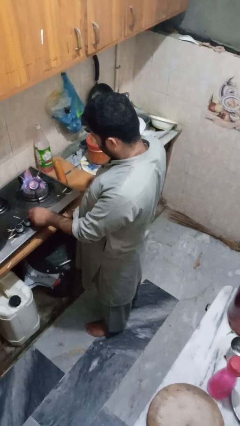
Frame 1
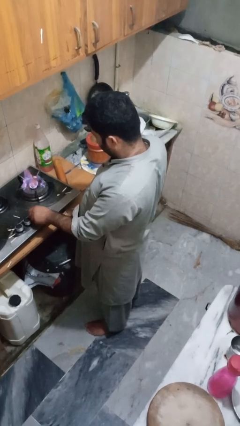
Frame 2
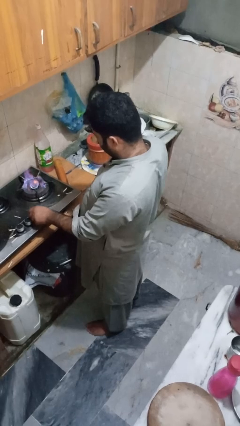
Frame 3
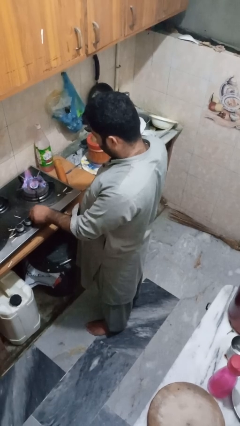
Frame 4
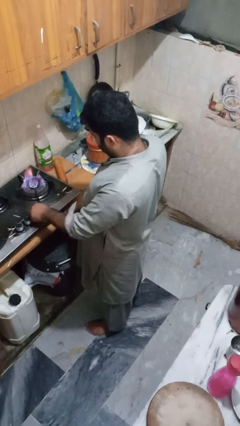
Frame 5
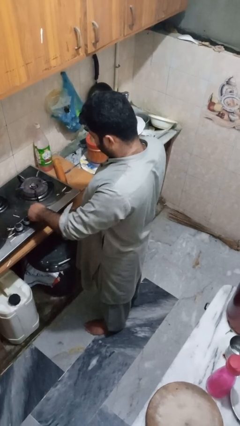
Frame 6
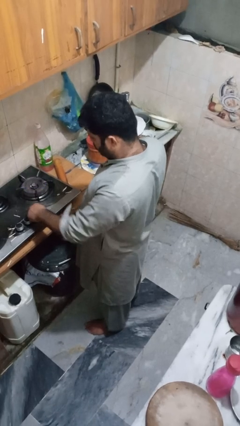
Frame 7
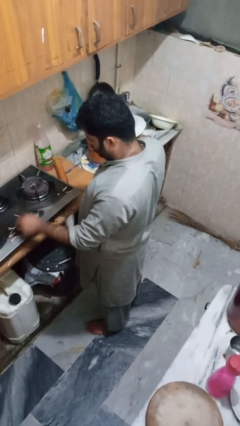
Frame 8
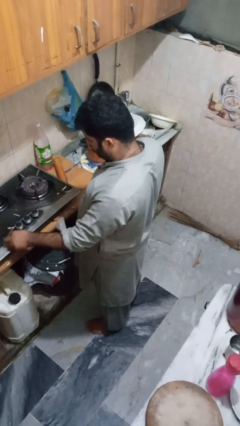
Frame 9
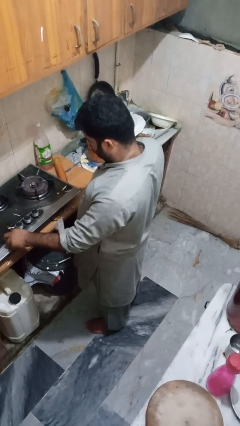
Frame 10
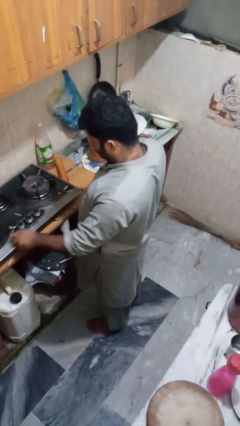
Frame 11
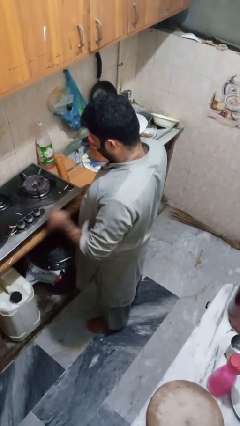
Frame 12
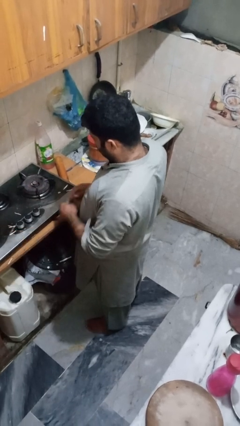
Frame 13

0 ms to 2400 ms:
person turns off stovetop

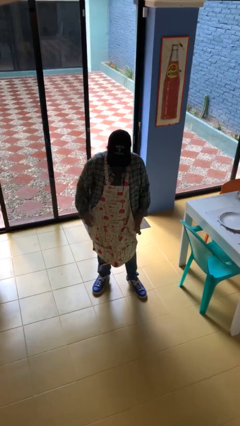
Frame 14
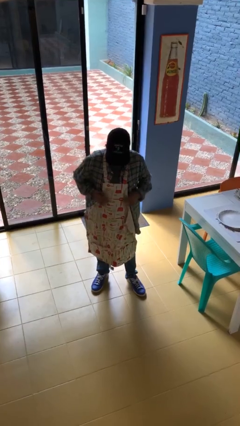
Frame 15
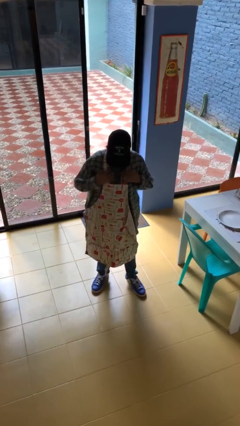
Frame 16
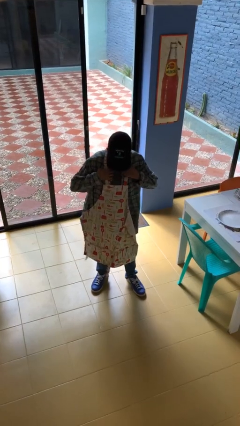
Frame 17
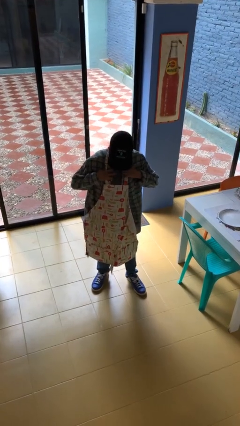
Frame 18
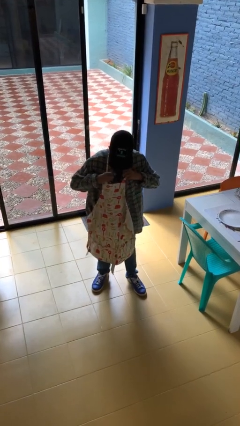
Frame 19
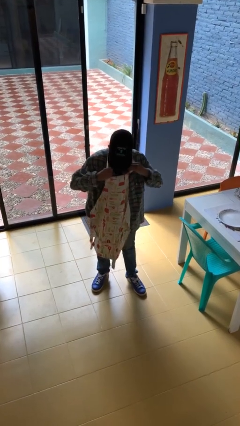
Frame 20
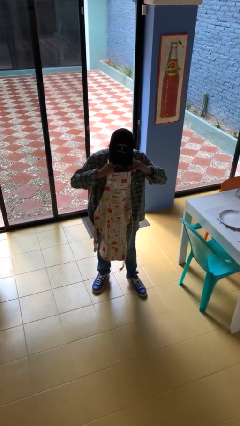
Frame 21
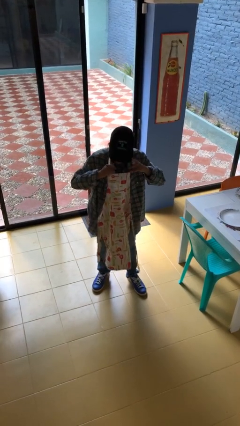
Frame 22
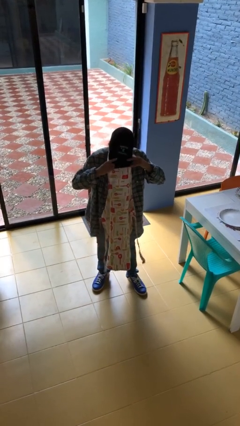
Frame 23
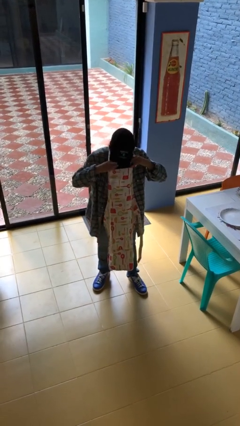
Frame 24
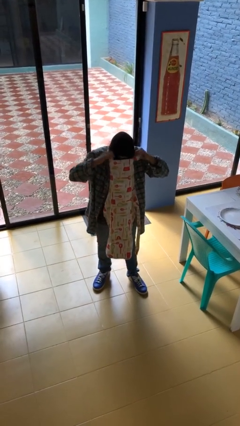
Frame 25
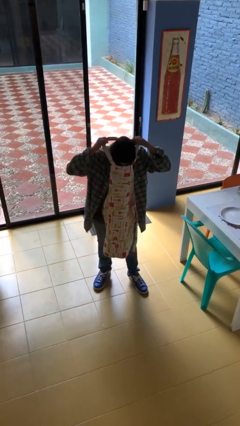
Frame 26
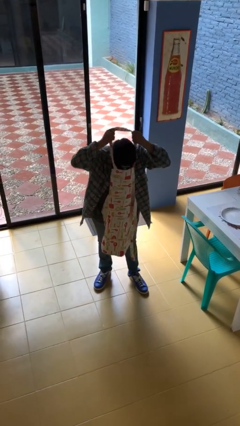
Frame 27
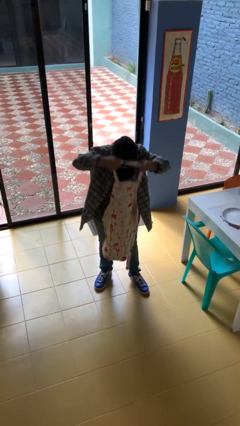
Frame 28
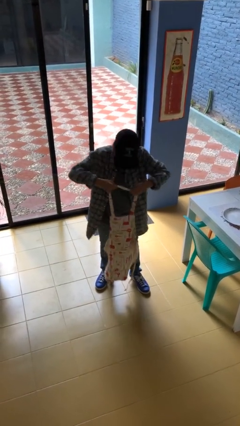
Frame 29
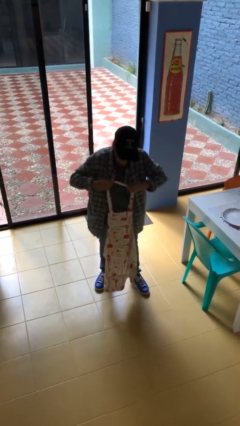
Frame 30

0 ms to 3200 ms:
person takes off apron

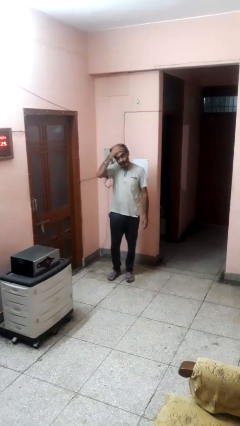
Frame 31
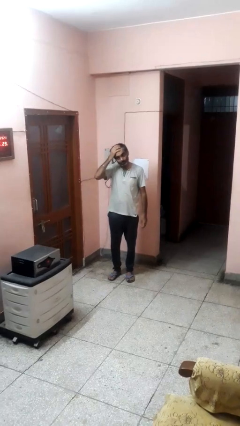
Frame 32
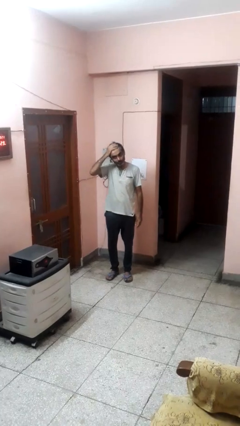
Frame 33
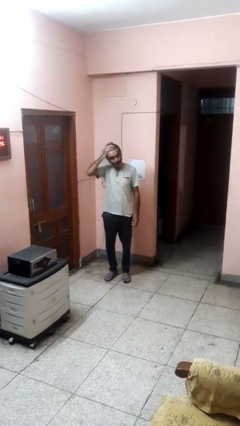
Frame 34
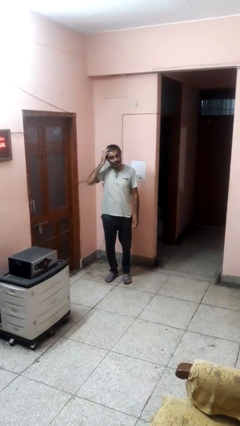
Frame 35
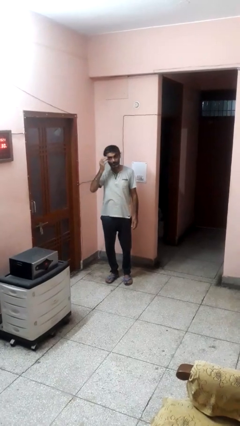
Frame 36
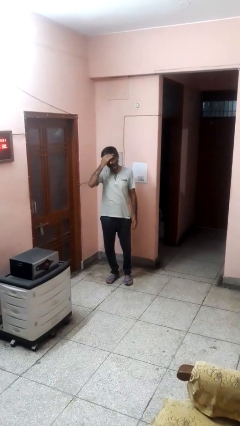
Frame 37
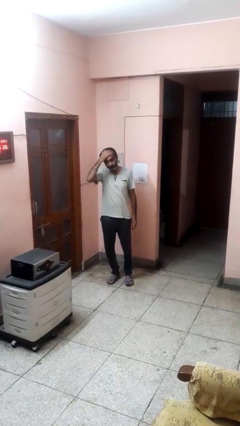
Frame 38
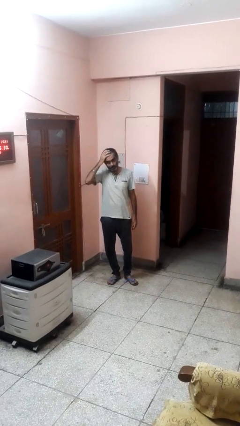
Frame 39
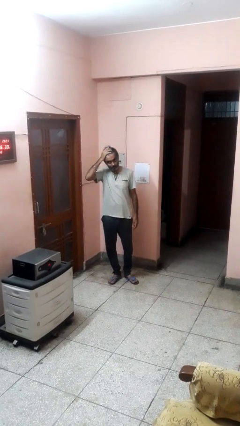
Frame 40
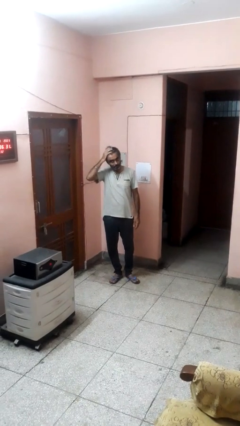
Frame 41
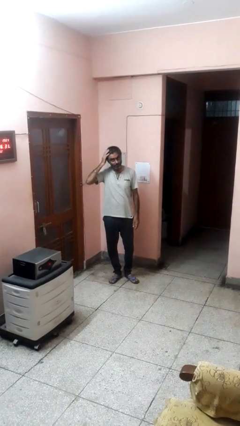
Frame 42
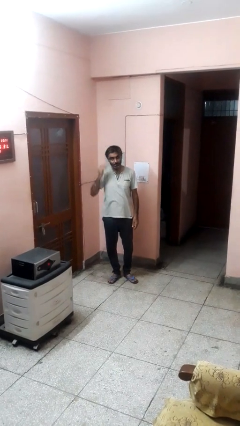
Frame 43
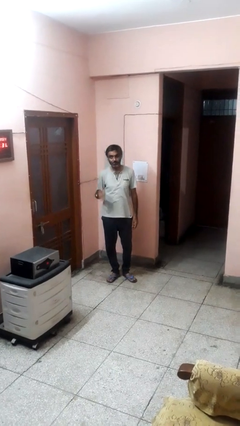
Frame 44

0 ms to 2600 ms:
person strokes hair

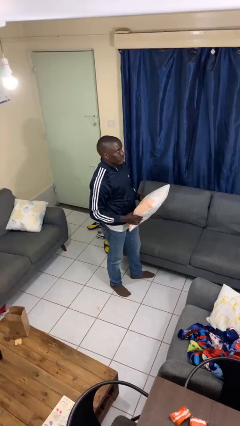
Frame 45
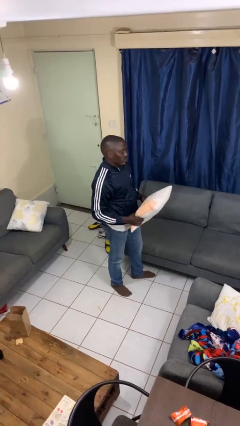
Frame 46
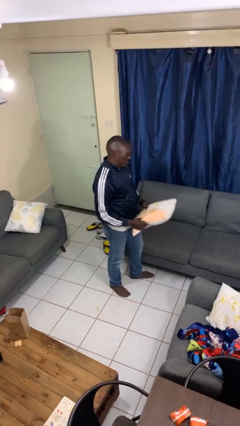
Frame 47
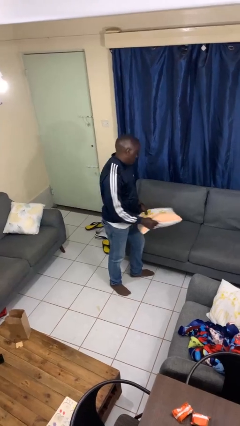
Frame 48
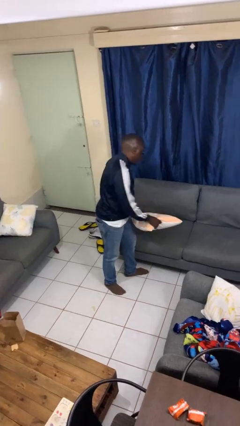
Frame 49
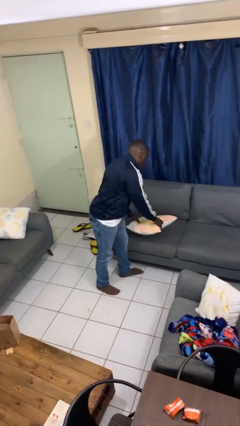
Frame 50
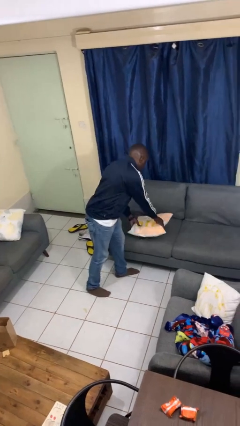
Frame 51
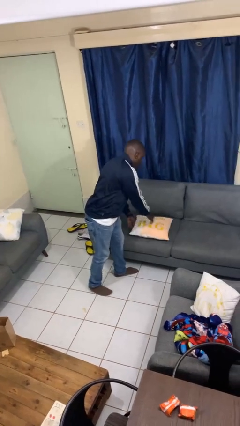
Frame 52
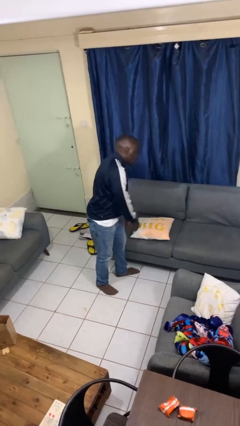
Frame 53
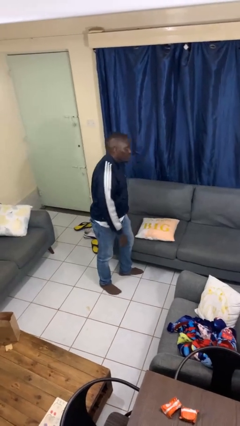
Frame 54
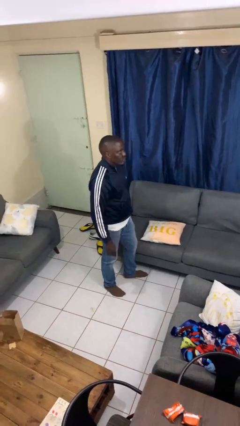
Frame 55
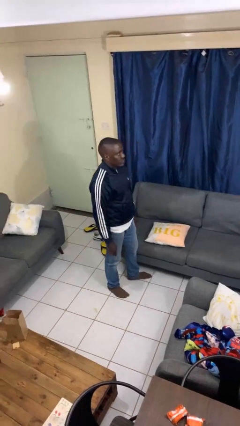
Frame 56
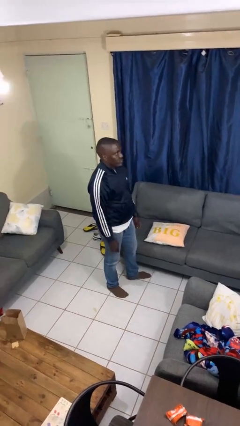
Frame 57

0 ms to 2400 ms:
person puts down object on couch

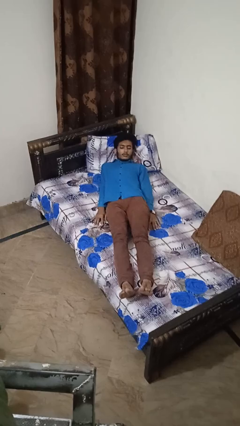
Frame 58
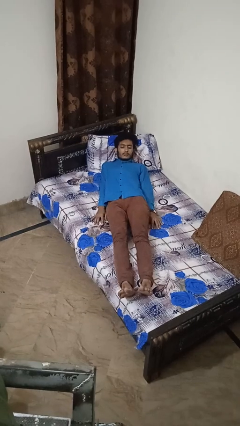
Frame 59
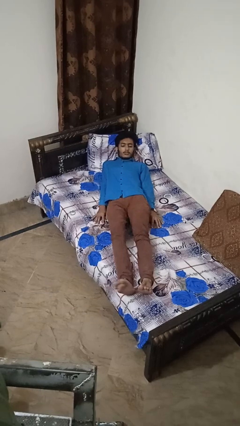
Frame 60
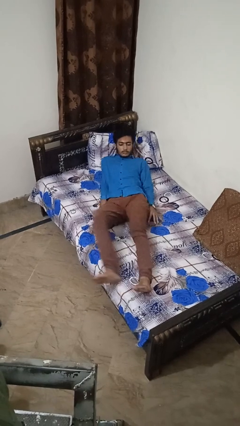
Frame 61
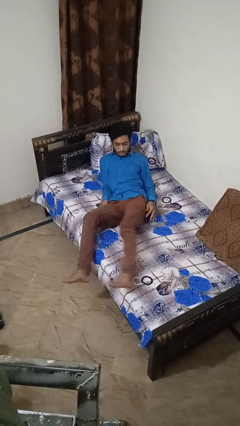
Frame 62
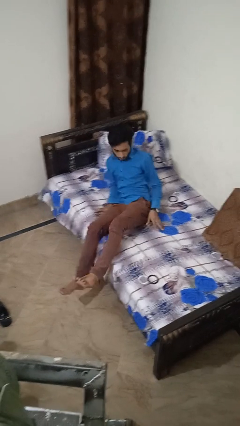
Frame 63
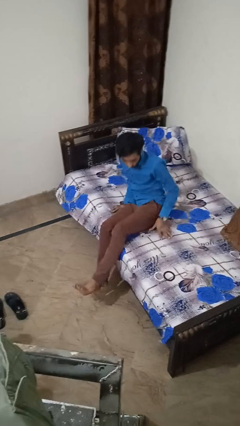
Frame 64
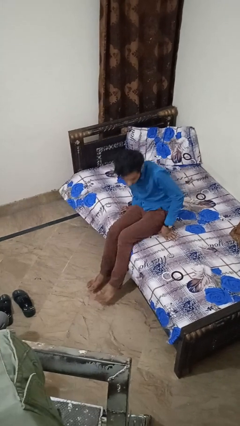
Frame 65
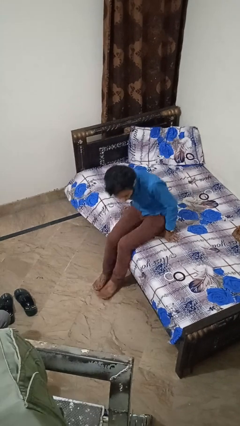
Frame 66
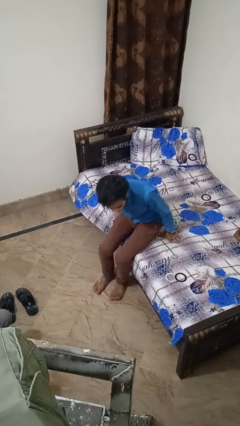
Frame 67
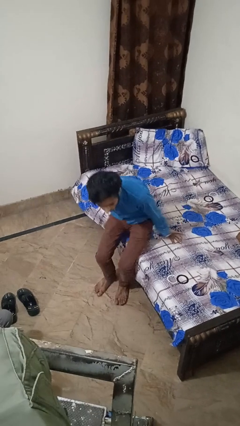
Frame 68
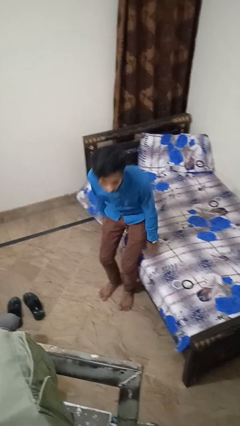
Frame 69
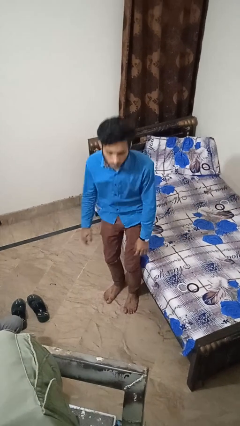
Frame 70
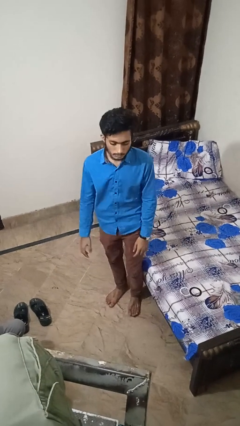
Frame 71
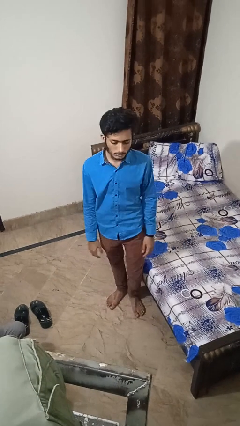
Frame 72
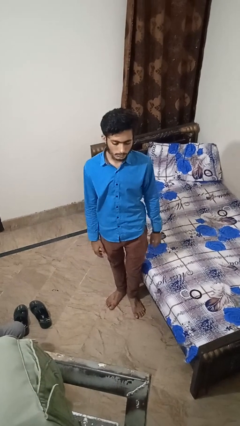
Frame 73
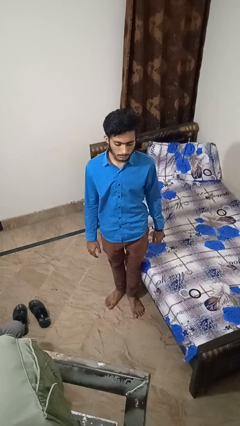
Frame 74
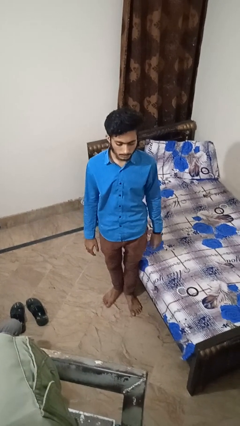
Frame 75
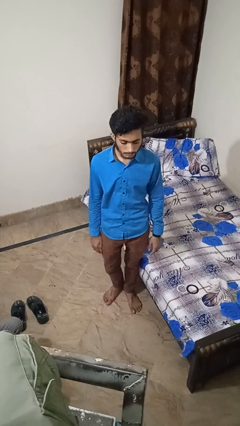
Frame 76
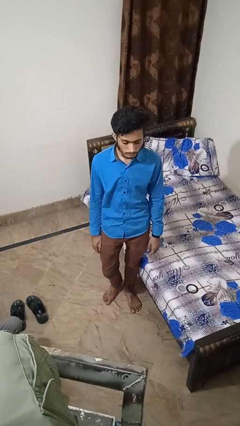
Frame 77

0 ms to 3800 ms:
person stands up

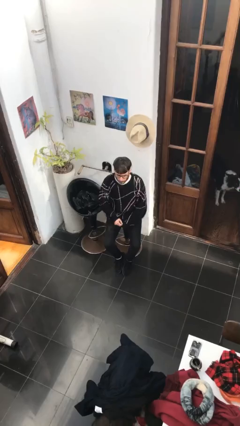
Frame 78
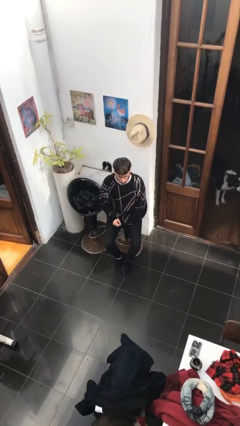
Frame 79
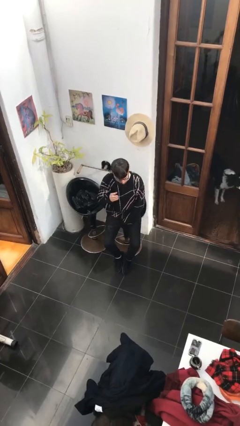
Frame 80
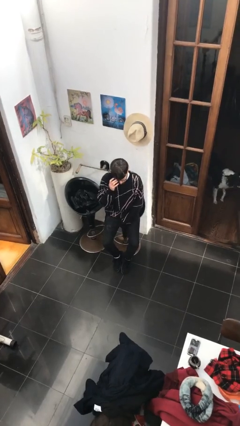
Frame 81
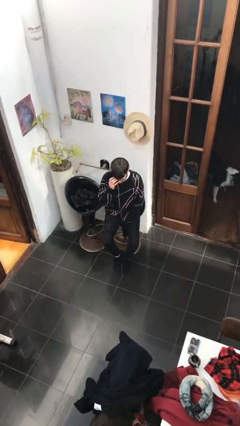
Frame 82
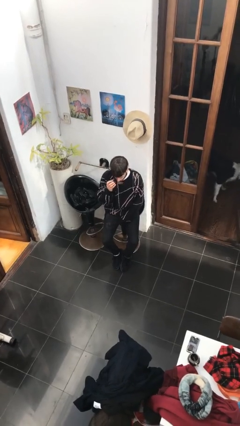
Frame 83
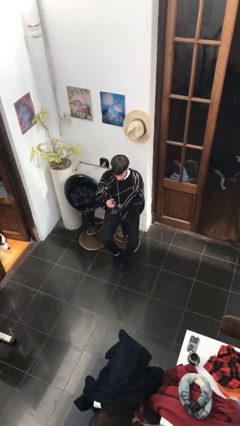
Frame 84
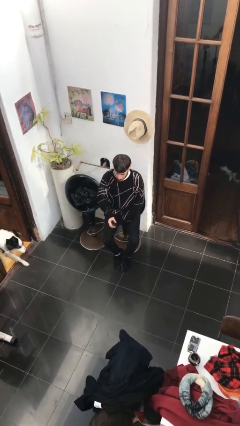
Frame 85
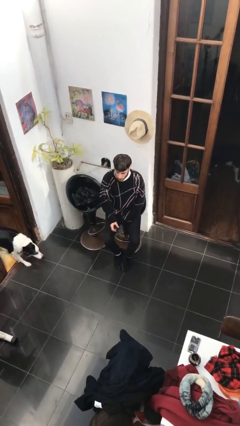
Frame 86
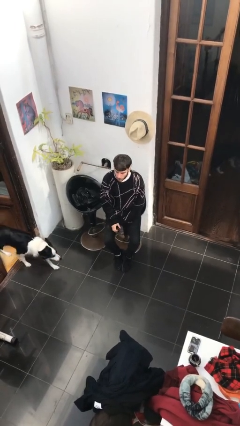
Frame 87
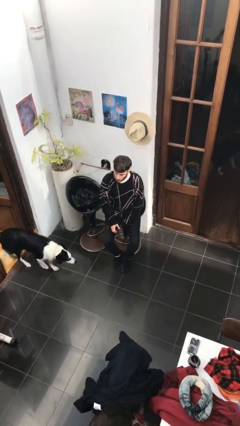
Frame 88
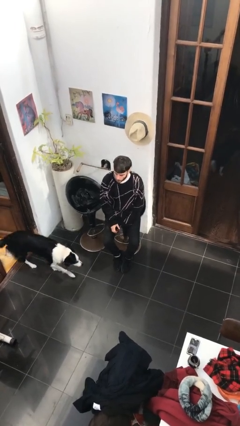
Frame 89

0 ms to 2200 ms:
person takes off glasses

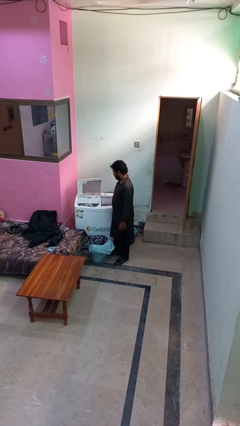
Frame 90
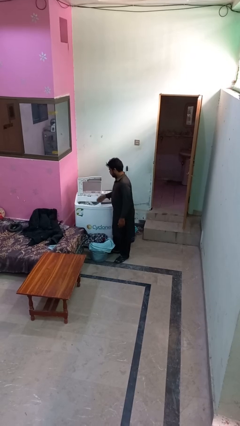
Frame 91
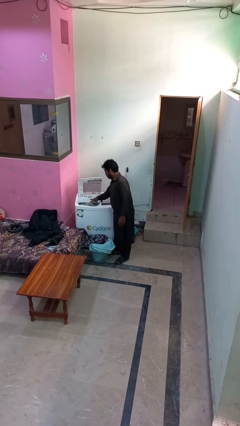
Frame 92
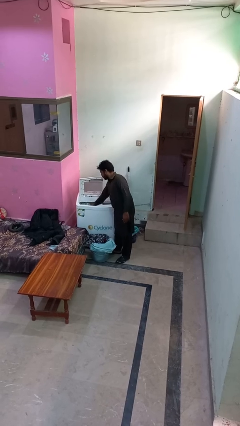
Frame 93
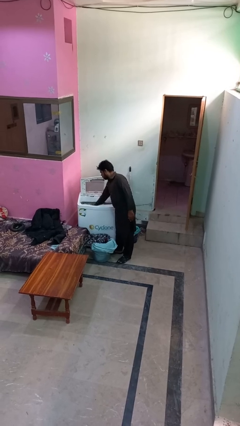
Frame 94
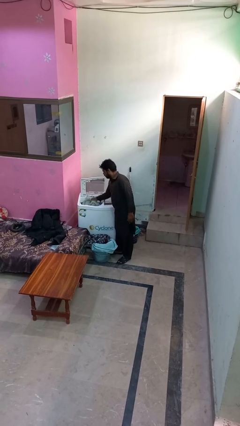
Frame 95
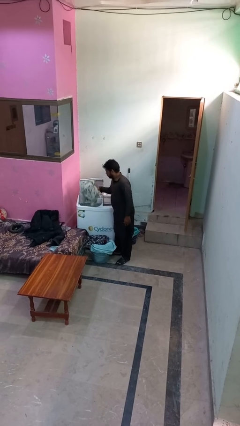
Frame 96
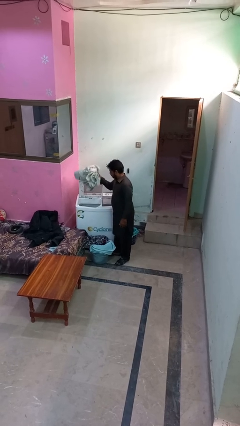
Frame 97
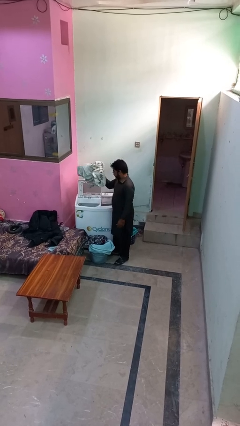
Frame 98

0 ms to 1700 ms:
person unloads clotheswasher
